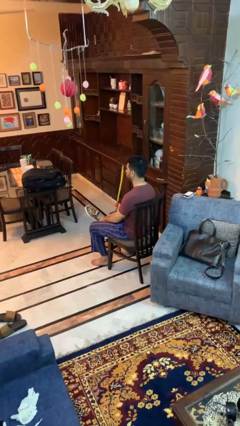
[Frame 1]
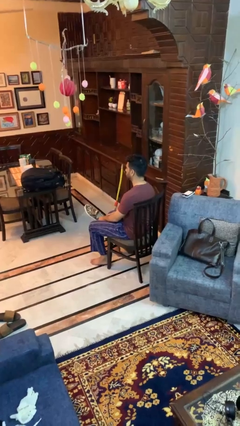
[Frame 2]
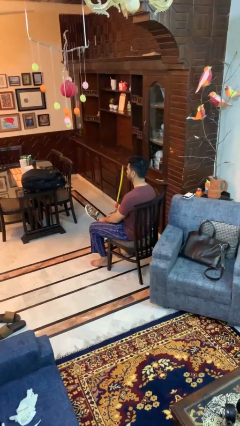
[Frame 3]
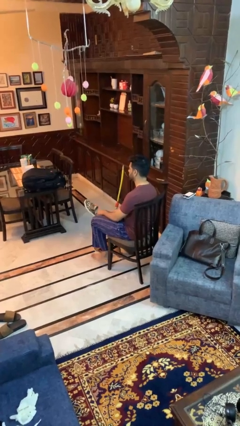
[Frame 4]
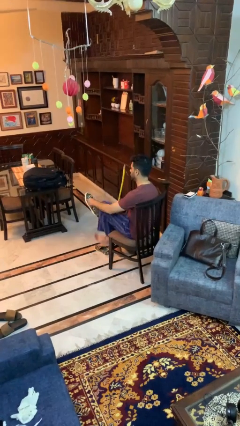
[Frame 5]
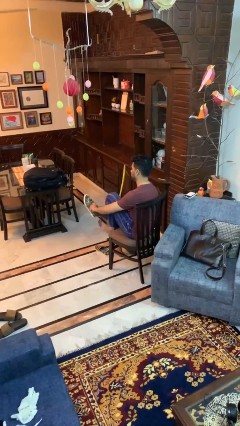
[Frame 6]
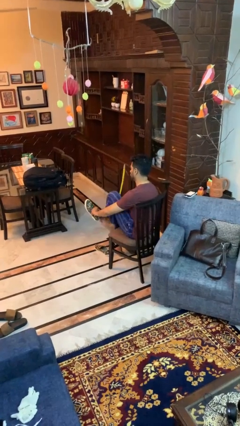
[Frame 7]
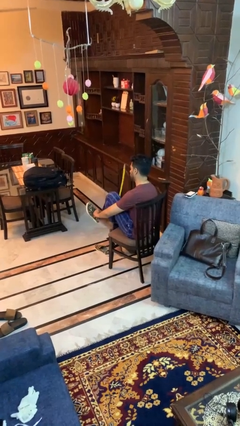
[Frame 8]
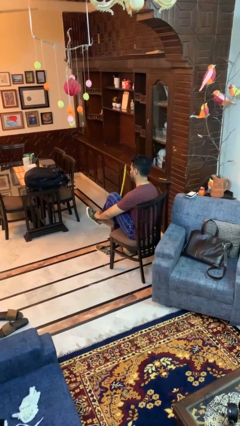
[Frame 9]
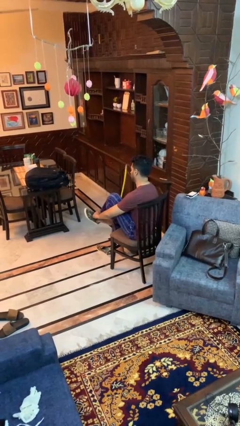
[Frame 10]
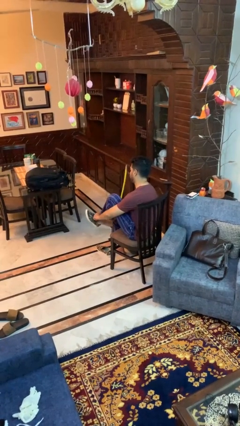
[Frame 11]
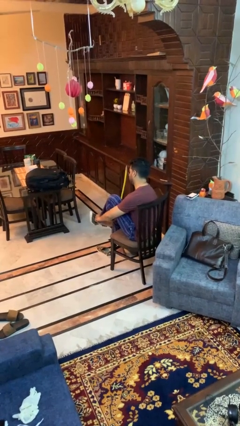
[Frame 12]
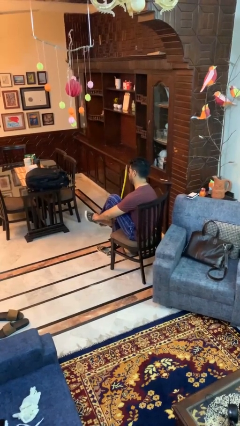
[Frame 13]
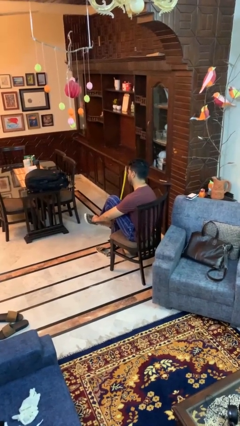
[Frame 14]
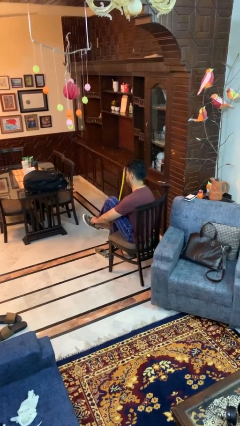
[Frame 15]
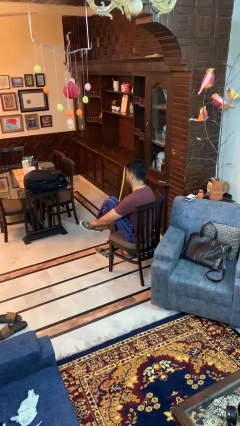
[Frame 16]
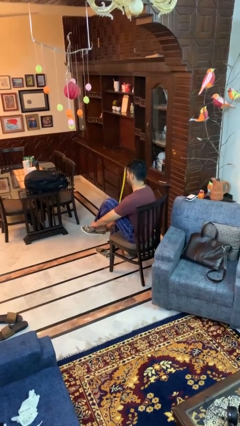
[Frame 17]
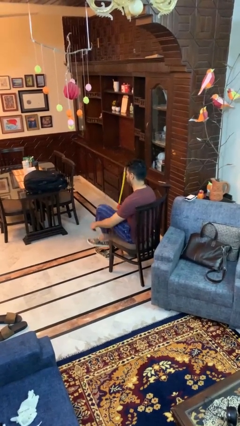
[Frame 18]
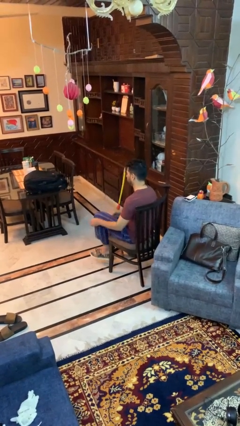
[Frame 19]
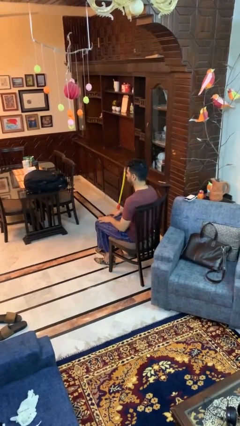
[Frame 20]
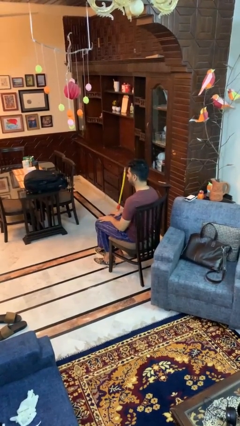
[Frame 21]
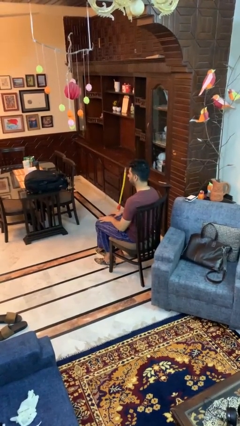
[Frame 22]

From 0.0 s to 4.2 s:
person puts on shoes

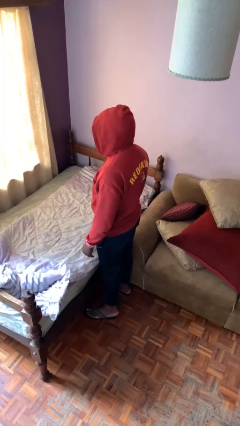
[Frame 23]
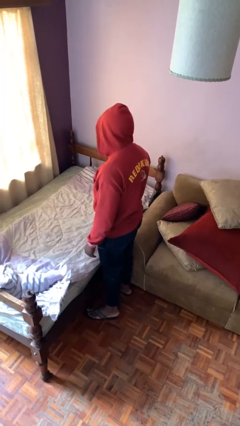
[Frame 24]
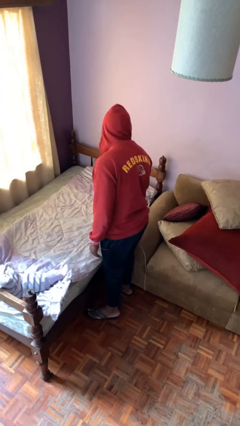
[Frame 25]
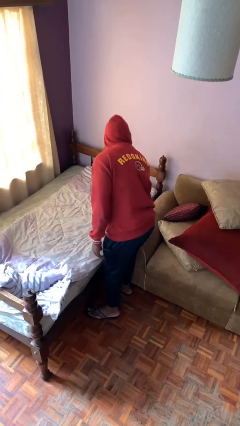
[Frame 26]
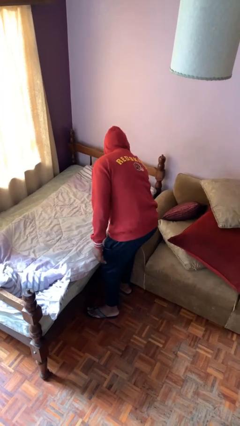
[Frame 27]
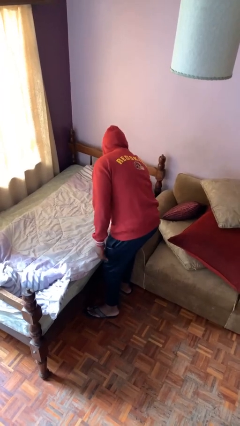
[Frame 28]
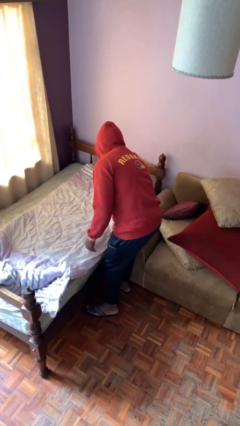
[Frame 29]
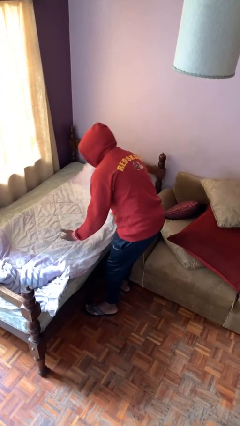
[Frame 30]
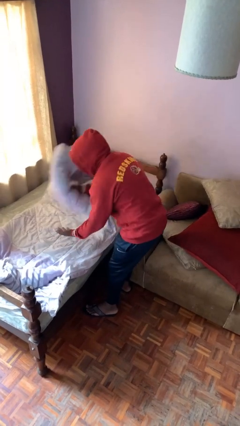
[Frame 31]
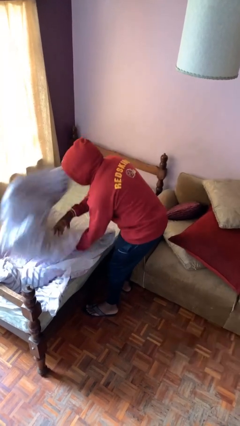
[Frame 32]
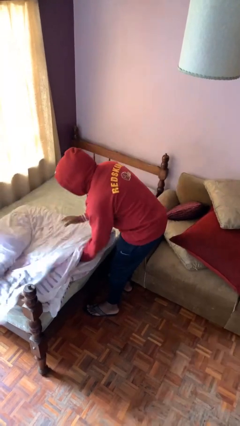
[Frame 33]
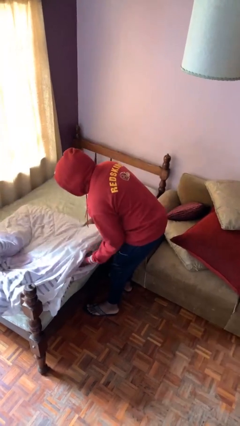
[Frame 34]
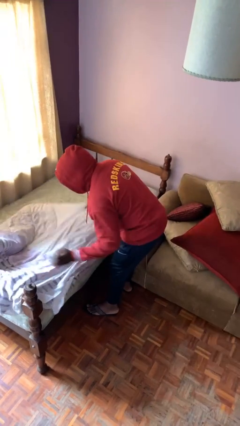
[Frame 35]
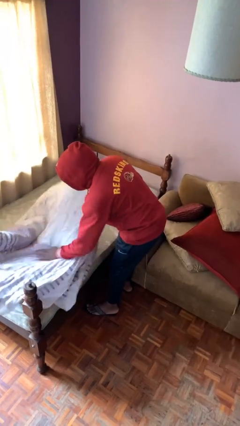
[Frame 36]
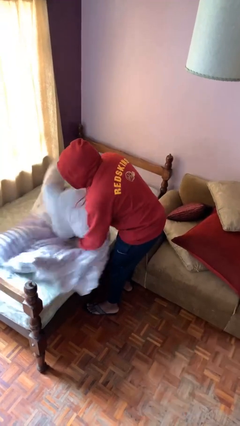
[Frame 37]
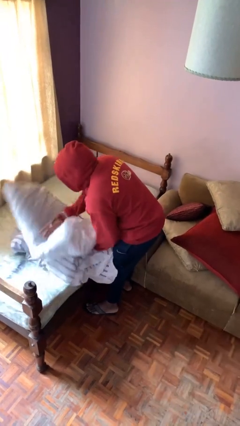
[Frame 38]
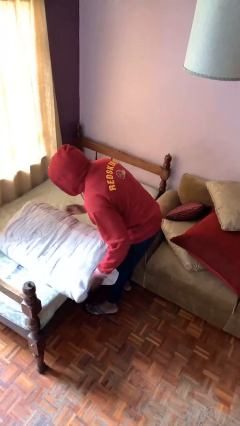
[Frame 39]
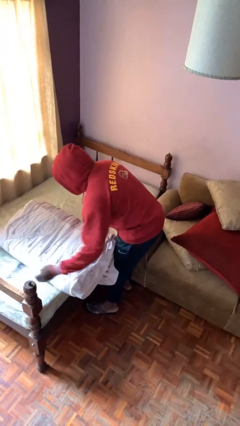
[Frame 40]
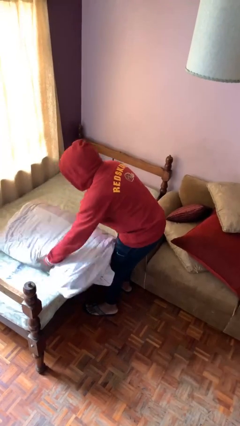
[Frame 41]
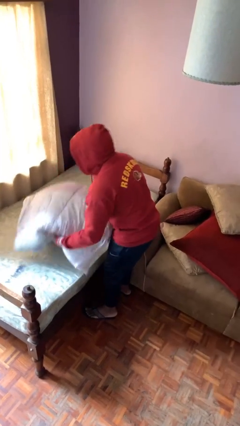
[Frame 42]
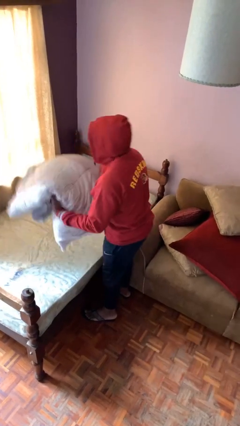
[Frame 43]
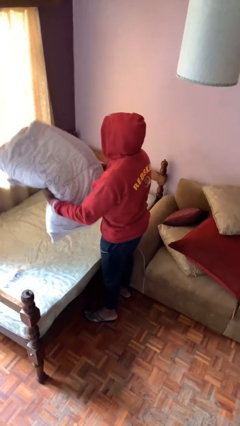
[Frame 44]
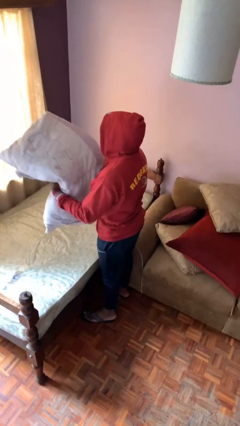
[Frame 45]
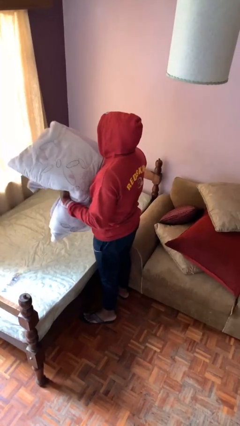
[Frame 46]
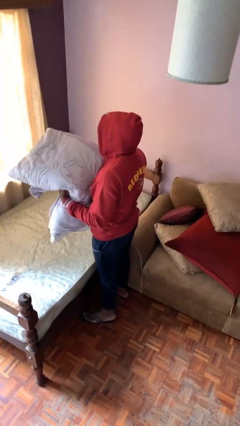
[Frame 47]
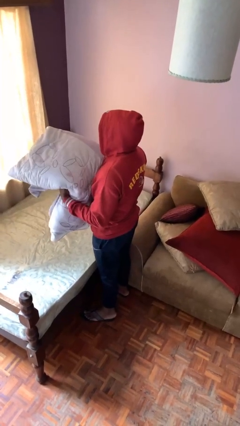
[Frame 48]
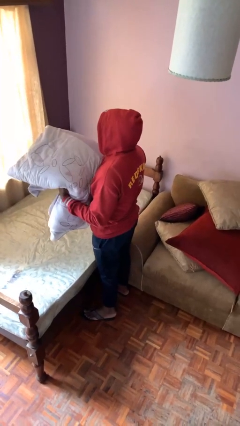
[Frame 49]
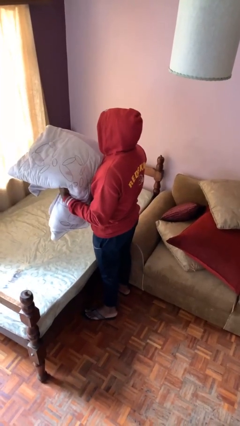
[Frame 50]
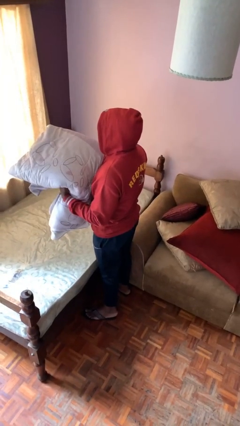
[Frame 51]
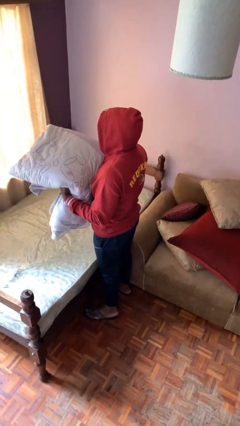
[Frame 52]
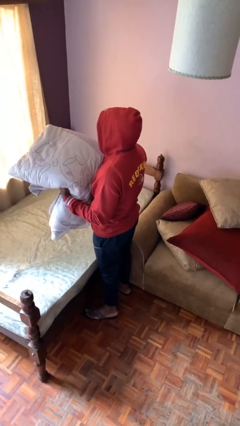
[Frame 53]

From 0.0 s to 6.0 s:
person folds blanket

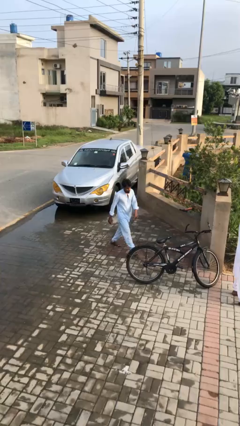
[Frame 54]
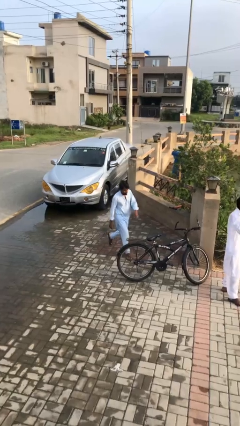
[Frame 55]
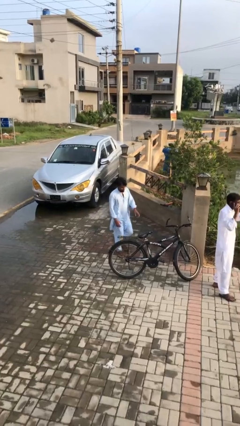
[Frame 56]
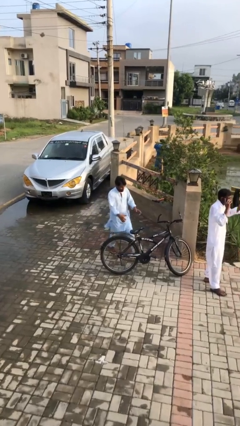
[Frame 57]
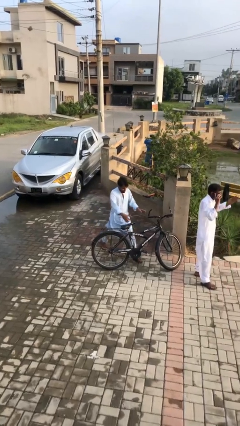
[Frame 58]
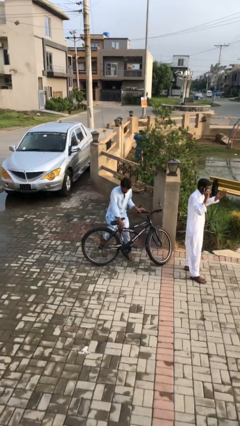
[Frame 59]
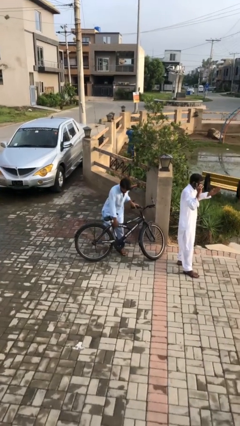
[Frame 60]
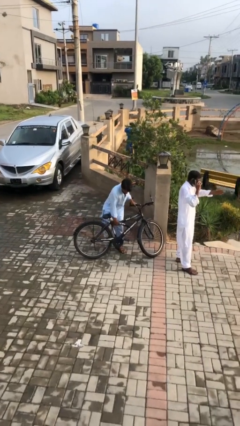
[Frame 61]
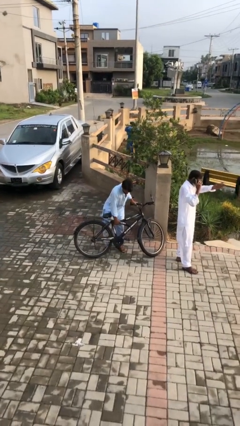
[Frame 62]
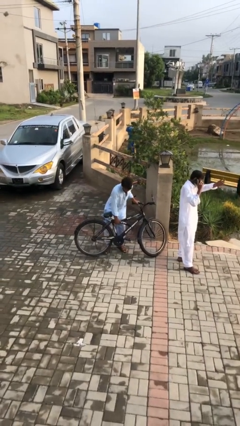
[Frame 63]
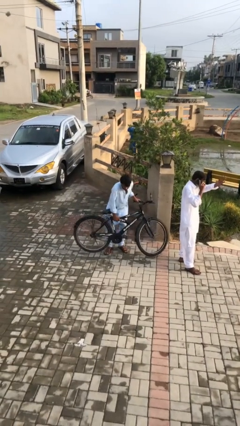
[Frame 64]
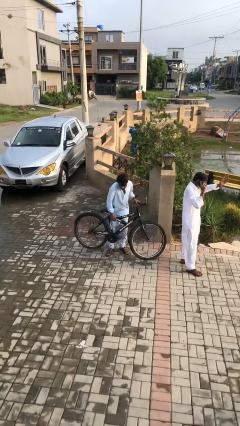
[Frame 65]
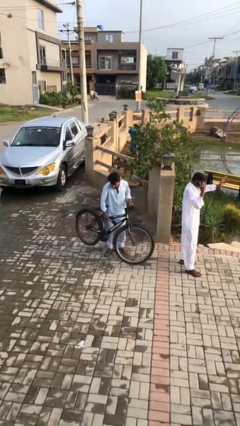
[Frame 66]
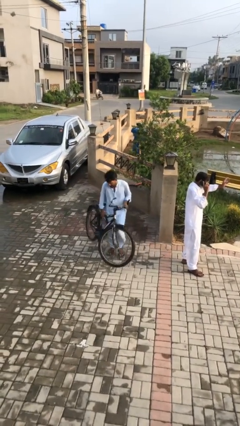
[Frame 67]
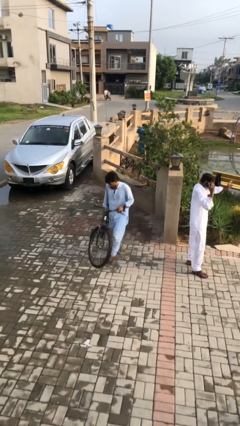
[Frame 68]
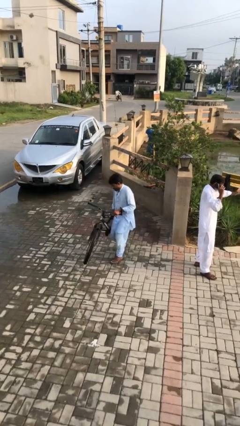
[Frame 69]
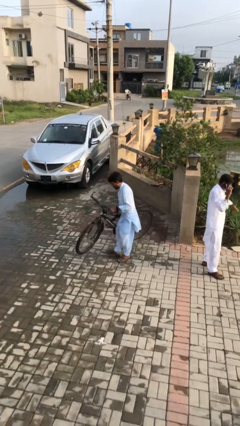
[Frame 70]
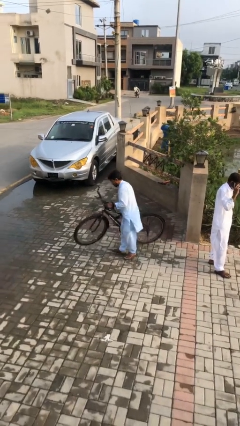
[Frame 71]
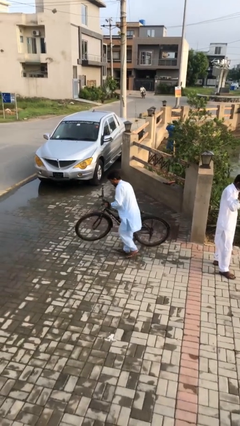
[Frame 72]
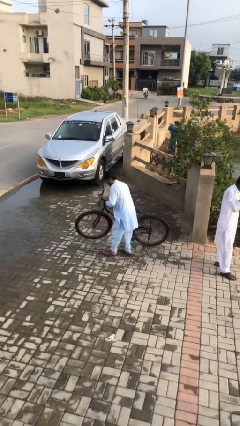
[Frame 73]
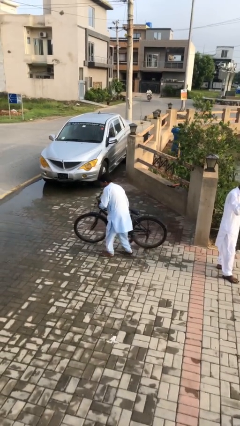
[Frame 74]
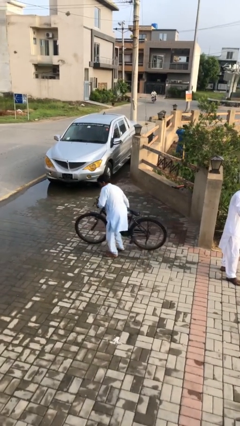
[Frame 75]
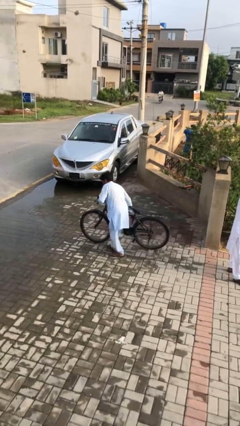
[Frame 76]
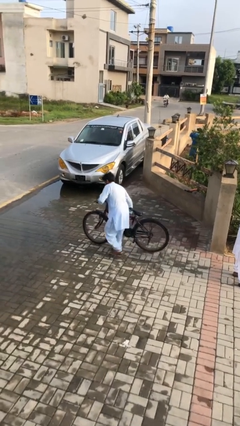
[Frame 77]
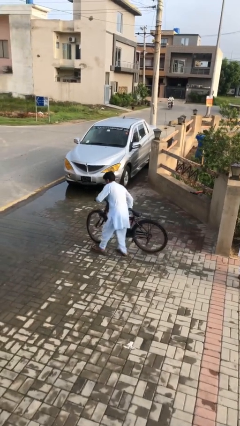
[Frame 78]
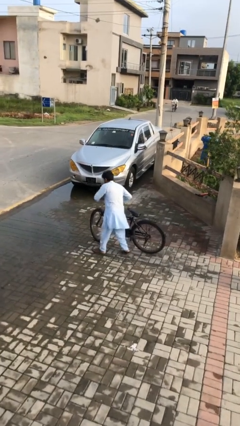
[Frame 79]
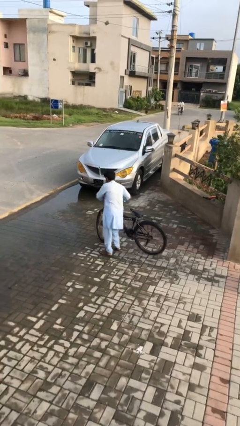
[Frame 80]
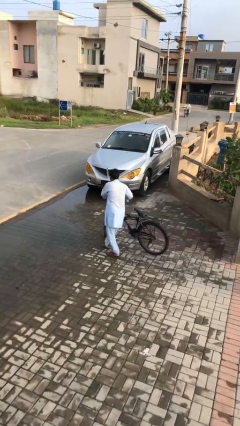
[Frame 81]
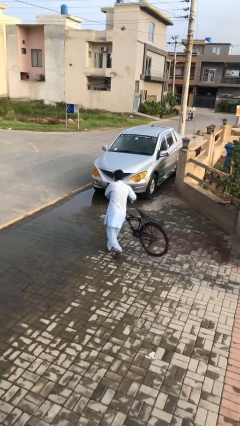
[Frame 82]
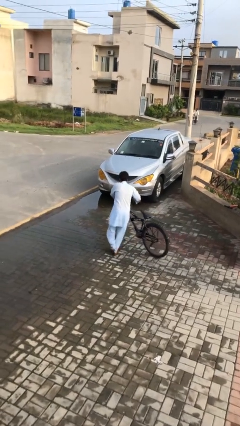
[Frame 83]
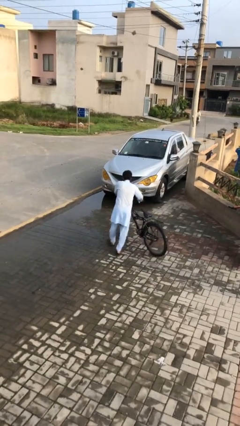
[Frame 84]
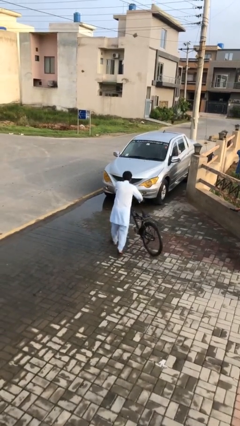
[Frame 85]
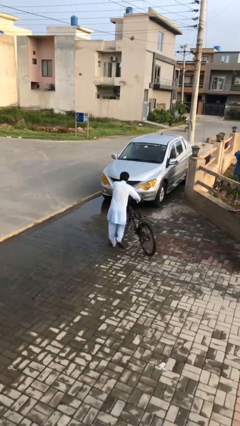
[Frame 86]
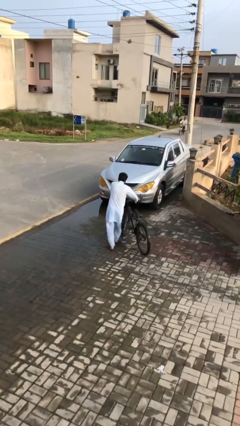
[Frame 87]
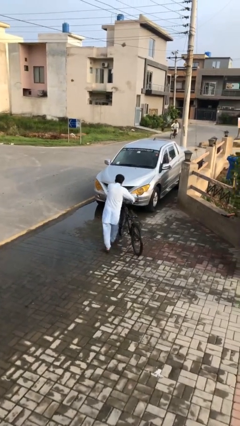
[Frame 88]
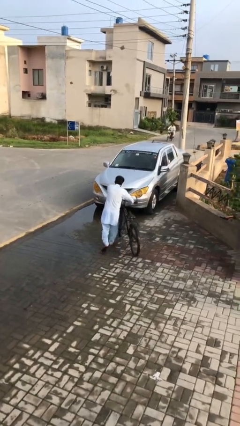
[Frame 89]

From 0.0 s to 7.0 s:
person steals object from person

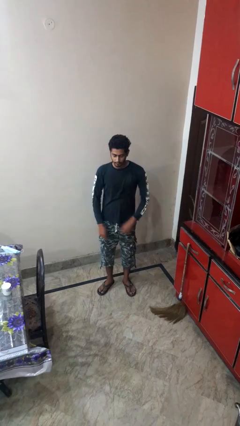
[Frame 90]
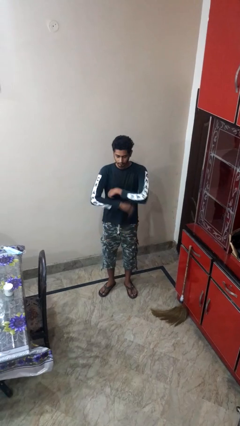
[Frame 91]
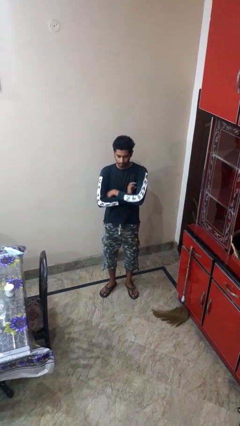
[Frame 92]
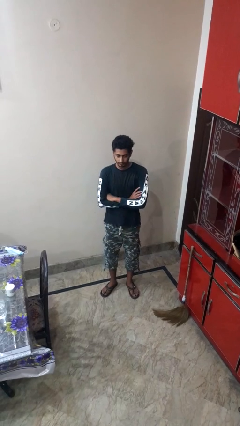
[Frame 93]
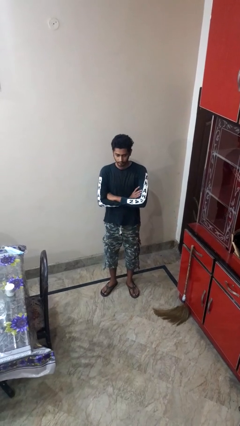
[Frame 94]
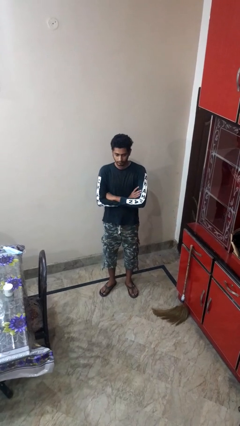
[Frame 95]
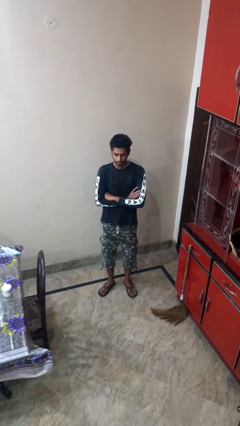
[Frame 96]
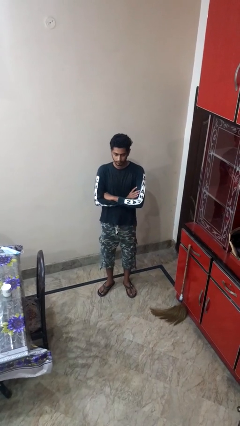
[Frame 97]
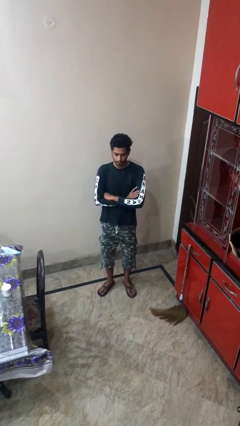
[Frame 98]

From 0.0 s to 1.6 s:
person crosses arms
